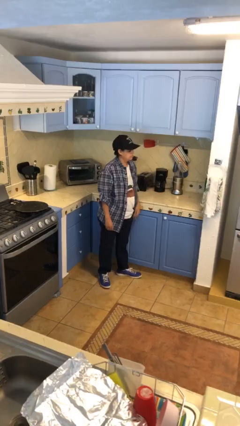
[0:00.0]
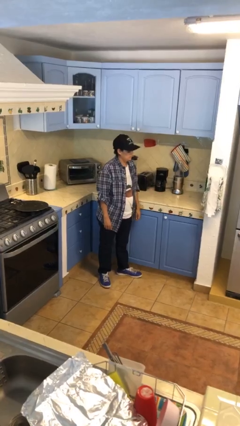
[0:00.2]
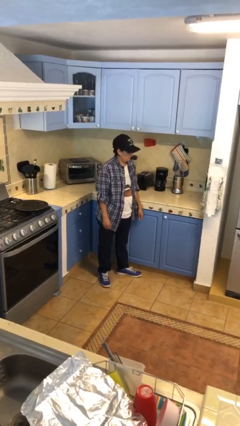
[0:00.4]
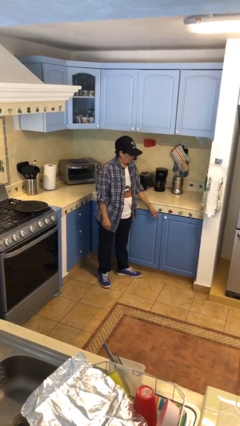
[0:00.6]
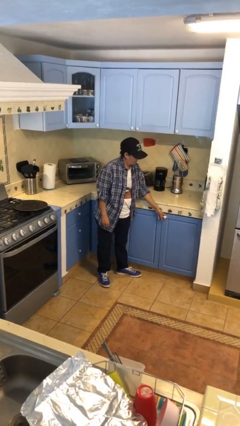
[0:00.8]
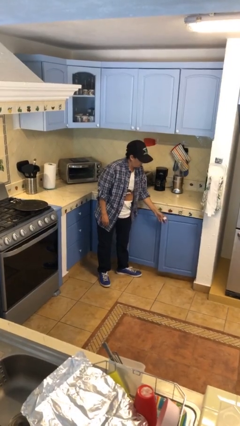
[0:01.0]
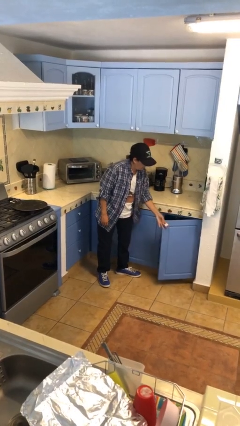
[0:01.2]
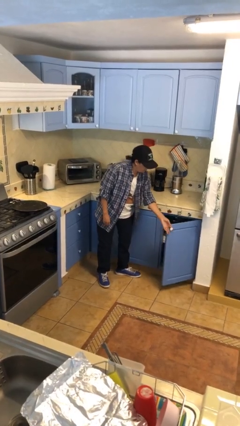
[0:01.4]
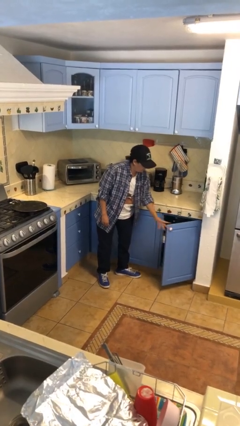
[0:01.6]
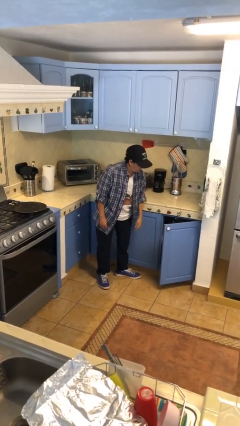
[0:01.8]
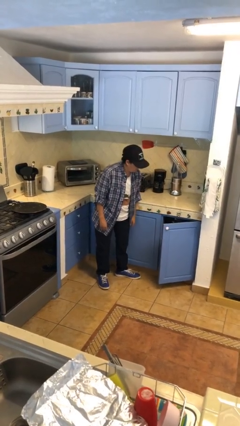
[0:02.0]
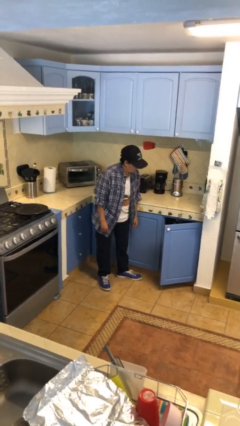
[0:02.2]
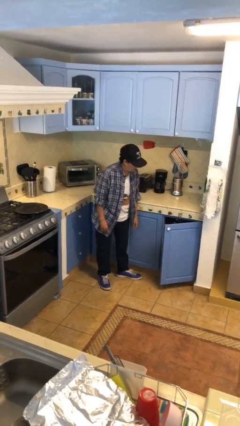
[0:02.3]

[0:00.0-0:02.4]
person opens cabinet

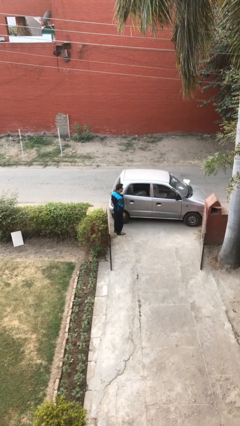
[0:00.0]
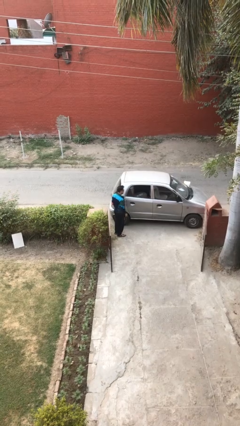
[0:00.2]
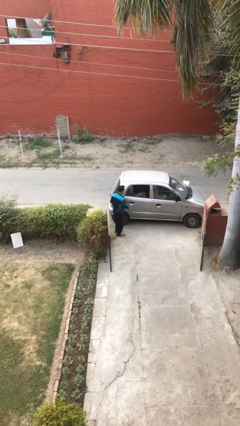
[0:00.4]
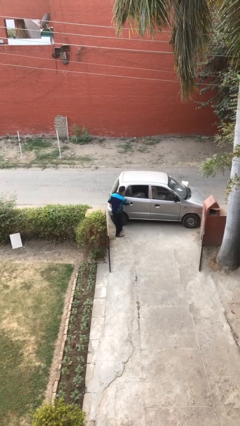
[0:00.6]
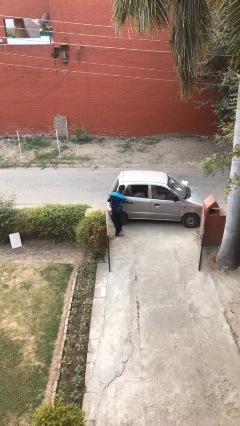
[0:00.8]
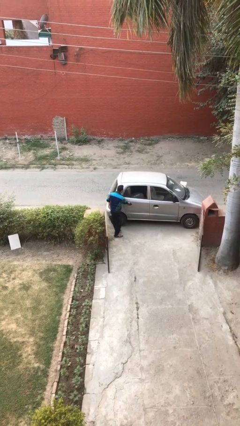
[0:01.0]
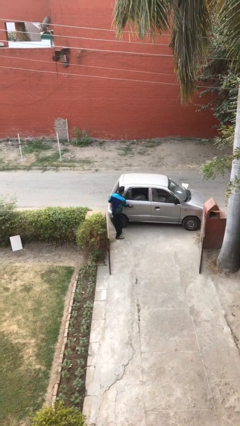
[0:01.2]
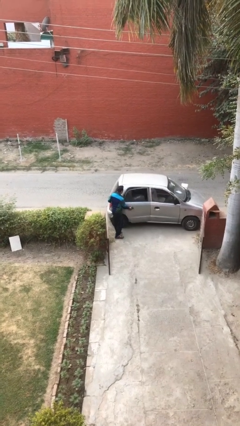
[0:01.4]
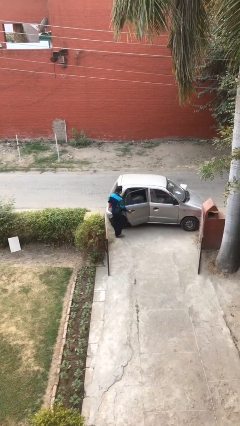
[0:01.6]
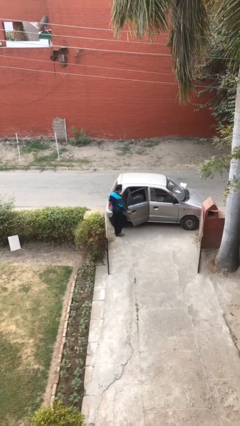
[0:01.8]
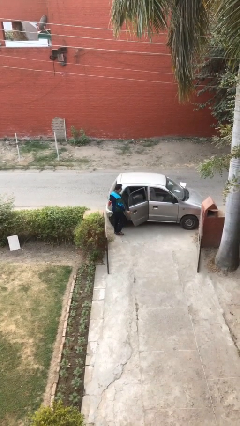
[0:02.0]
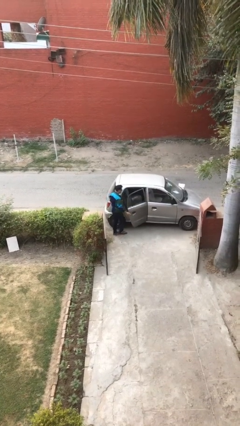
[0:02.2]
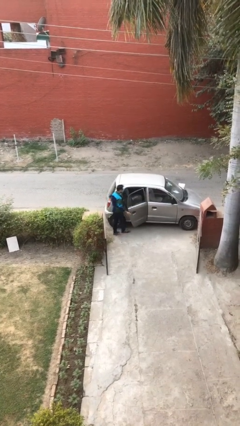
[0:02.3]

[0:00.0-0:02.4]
person opens car door

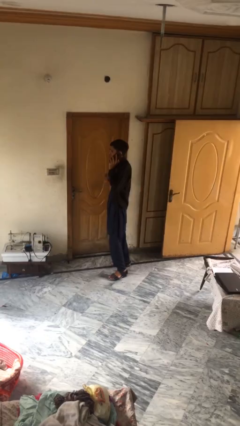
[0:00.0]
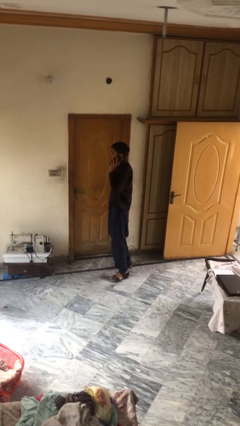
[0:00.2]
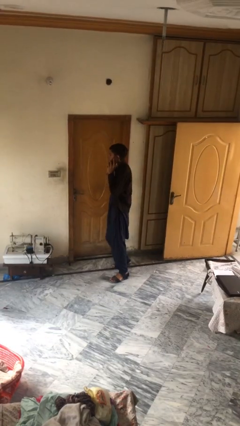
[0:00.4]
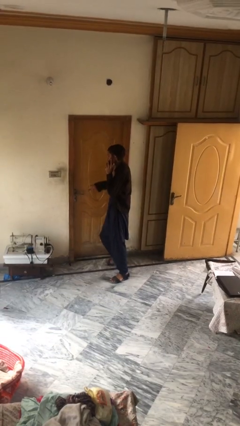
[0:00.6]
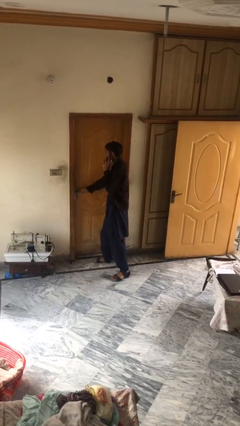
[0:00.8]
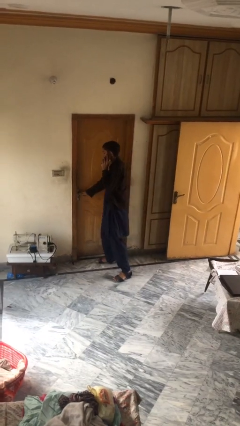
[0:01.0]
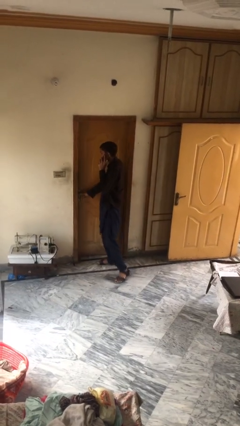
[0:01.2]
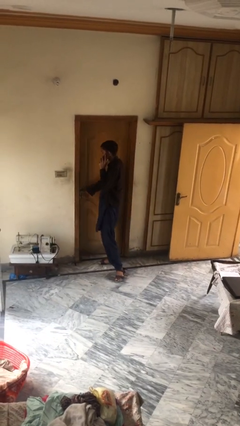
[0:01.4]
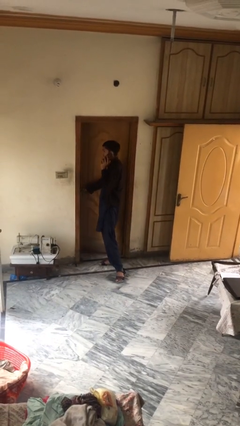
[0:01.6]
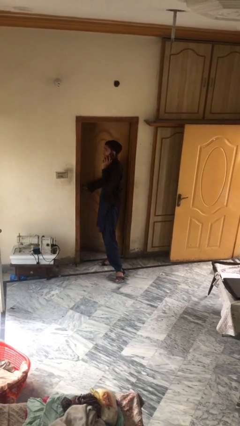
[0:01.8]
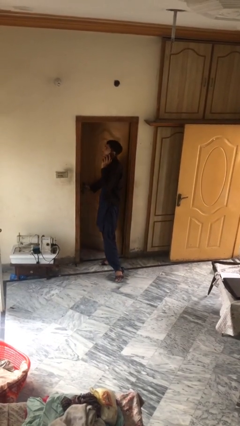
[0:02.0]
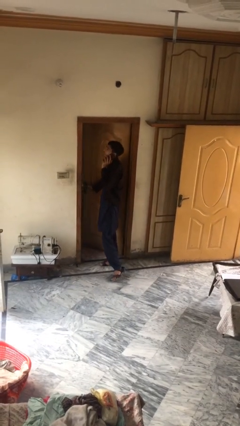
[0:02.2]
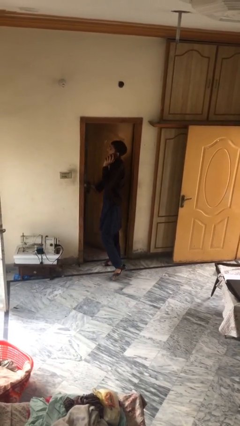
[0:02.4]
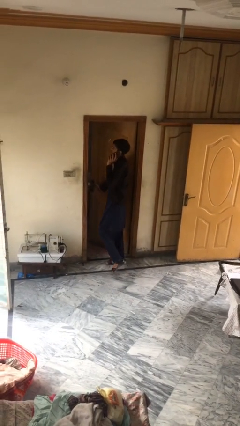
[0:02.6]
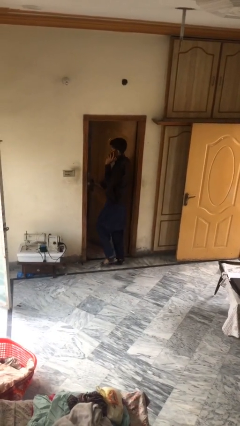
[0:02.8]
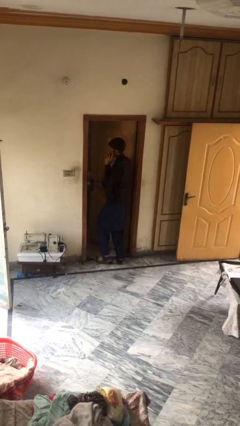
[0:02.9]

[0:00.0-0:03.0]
person opens facility door

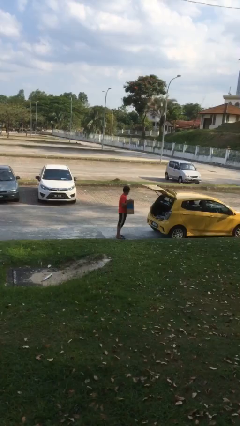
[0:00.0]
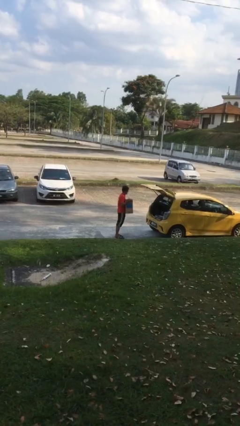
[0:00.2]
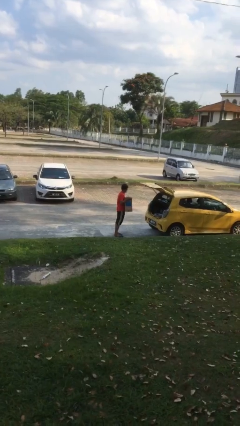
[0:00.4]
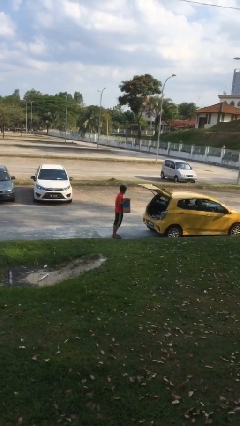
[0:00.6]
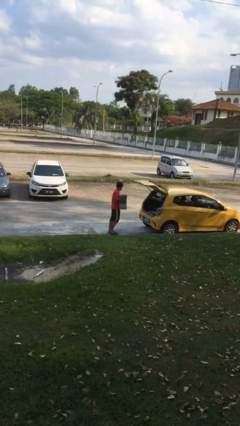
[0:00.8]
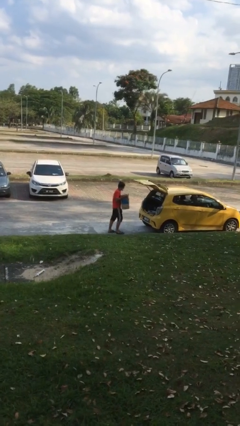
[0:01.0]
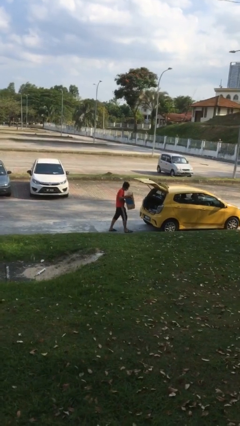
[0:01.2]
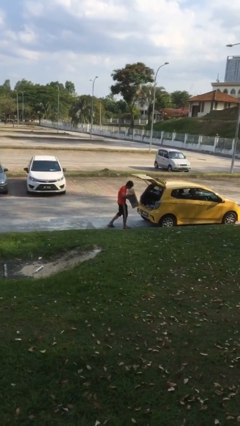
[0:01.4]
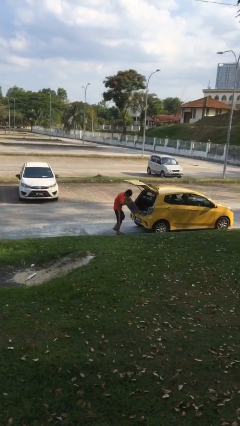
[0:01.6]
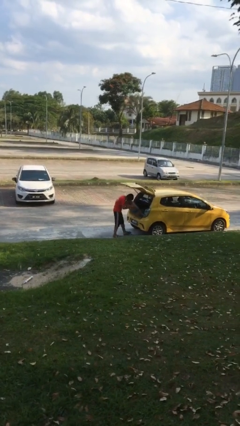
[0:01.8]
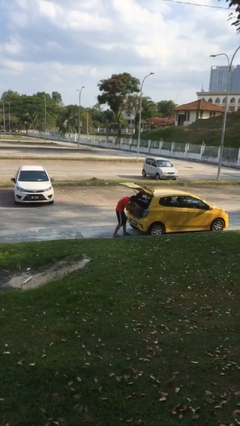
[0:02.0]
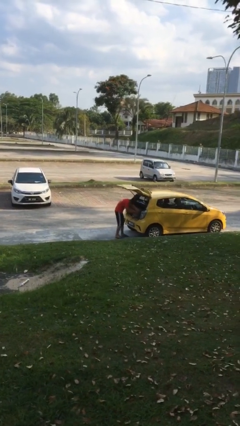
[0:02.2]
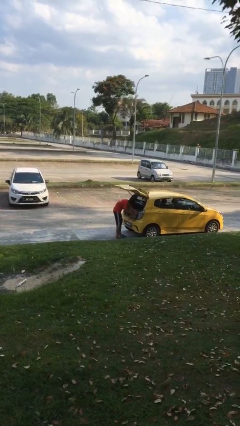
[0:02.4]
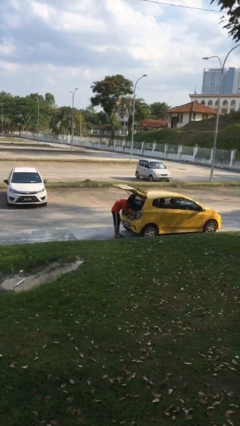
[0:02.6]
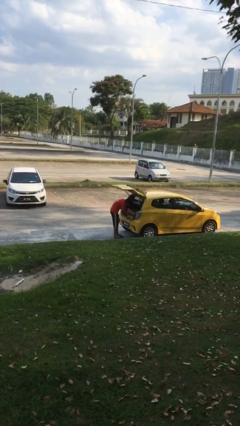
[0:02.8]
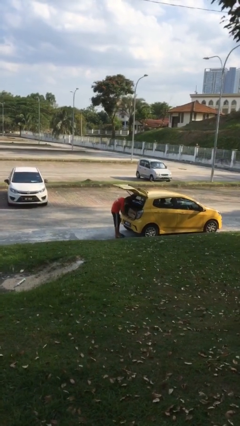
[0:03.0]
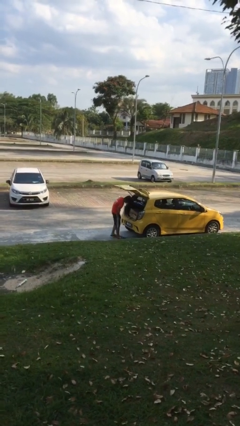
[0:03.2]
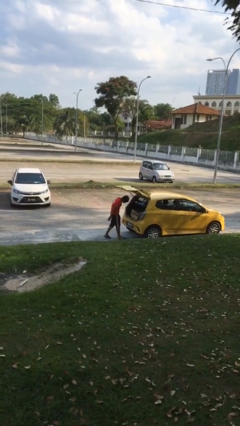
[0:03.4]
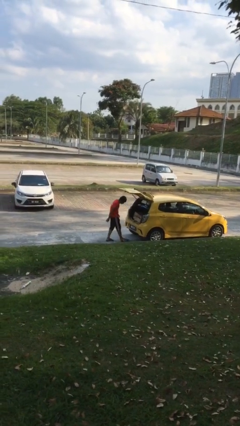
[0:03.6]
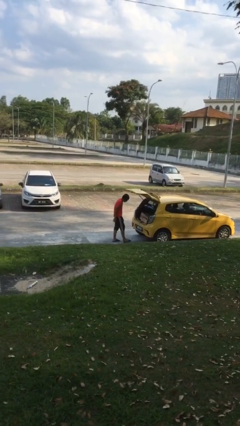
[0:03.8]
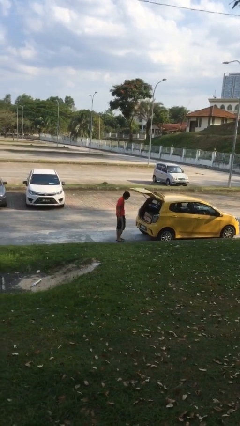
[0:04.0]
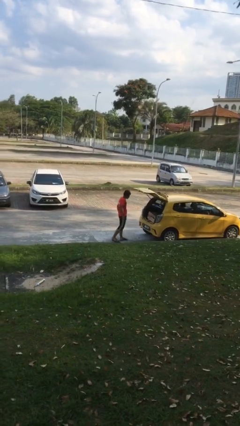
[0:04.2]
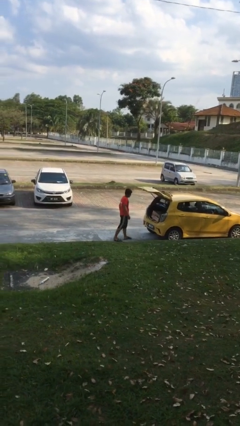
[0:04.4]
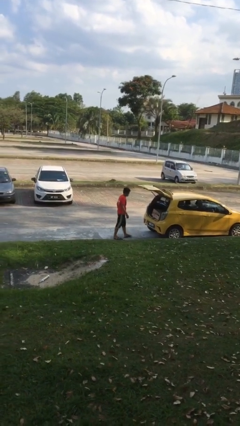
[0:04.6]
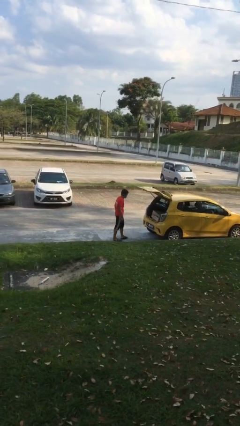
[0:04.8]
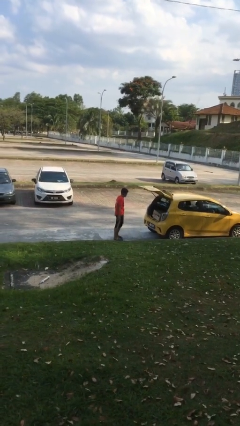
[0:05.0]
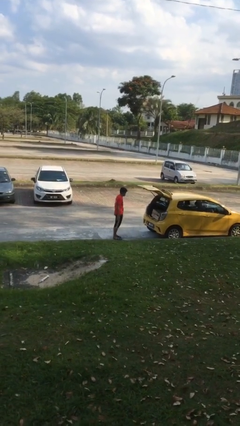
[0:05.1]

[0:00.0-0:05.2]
person loads car

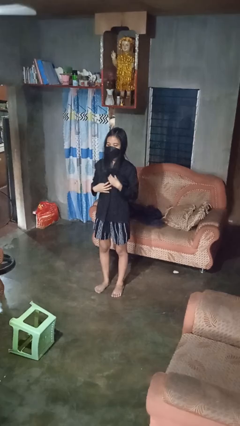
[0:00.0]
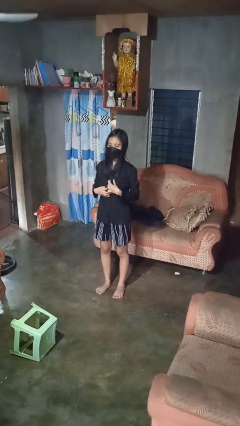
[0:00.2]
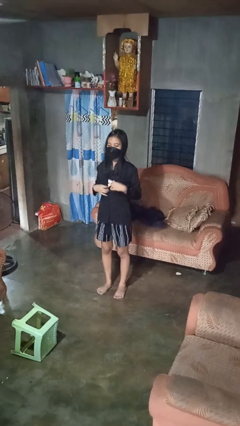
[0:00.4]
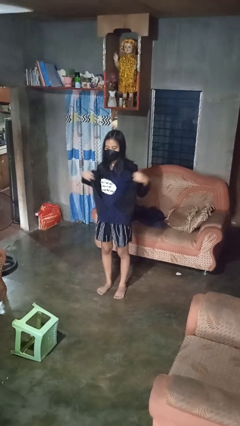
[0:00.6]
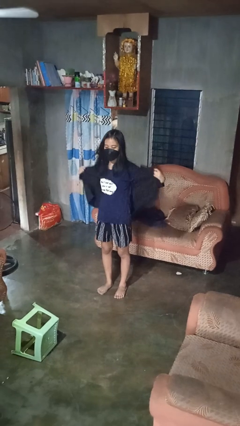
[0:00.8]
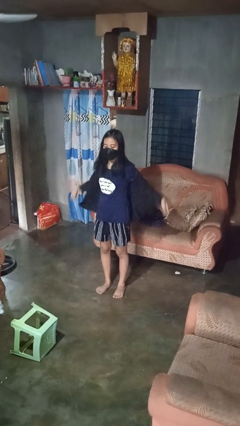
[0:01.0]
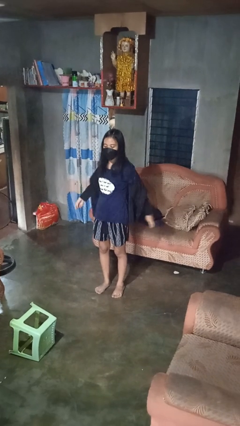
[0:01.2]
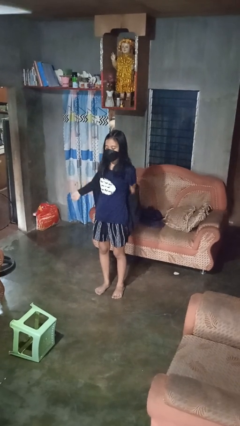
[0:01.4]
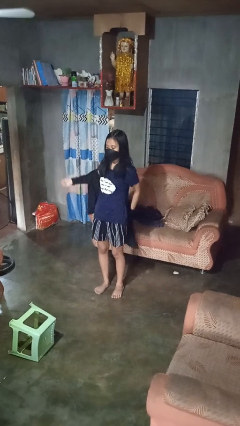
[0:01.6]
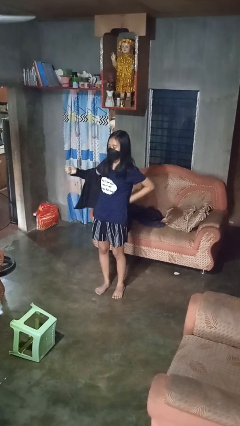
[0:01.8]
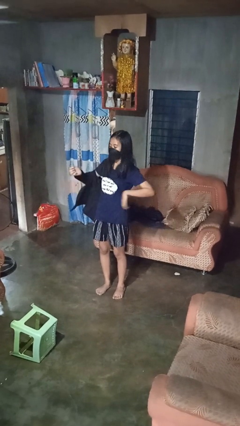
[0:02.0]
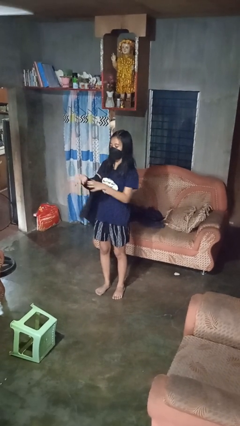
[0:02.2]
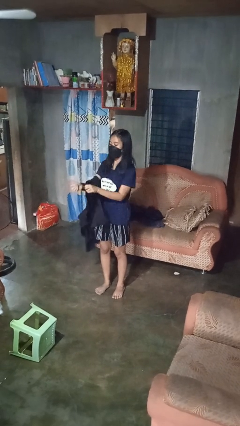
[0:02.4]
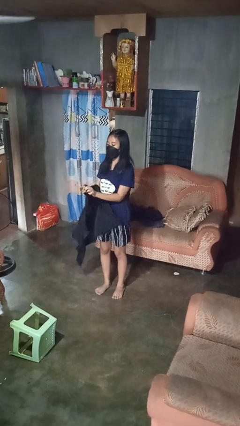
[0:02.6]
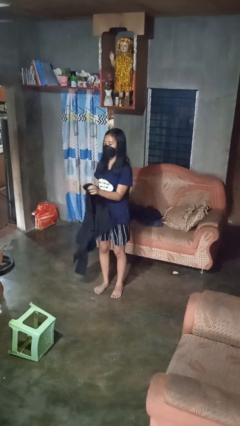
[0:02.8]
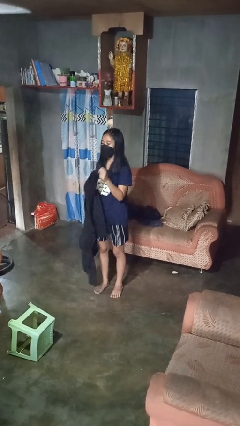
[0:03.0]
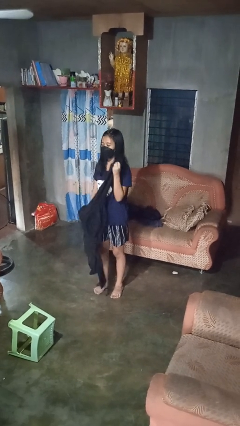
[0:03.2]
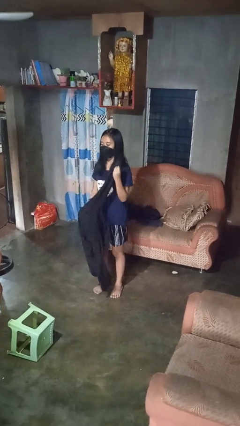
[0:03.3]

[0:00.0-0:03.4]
person takes off shirt

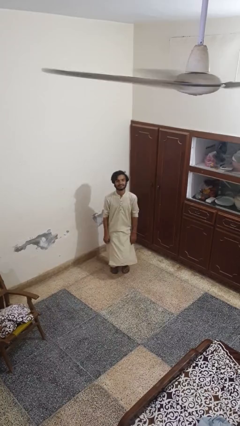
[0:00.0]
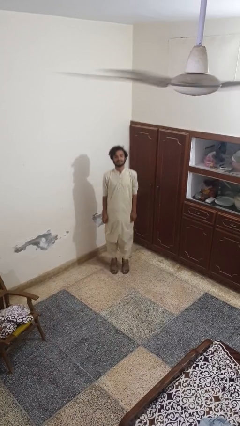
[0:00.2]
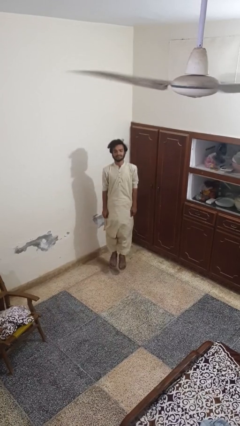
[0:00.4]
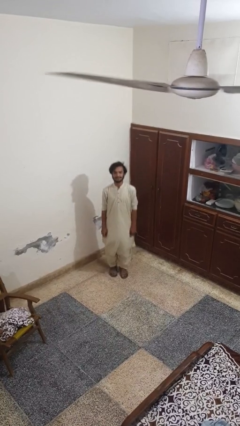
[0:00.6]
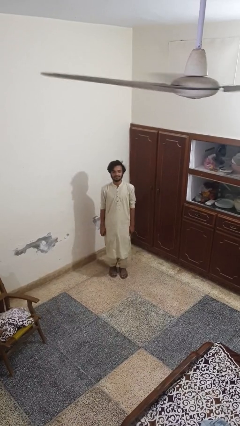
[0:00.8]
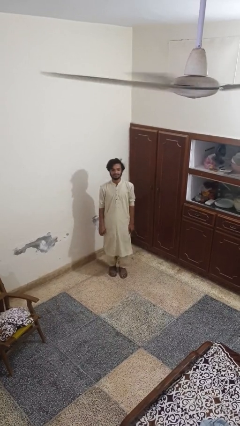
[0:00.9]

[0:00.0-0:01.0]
person jumps

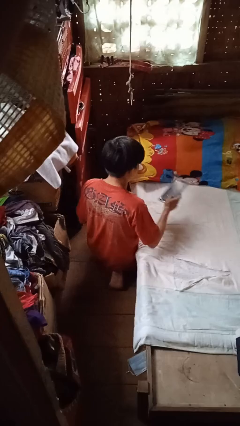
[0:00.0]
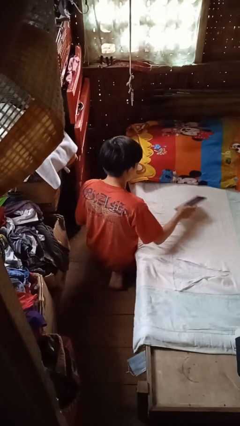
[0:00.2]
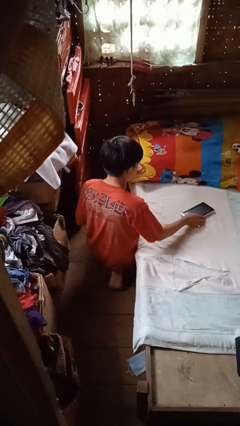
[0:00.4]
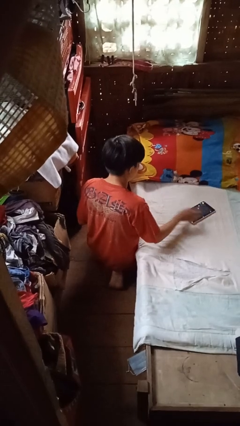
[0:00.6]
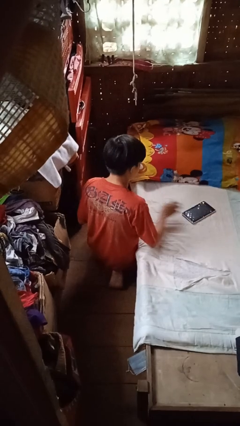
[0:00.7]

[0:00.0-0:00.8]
person puts down object on bed
